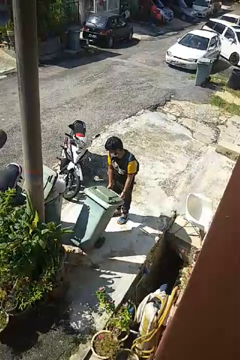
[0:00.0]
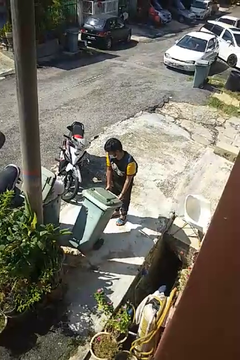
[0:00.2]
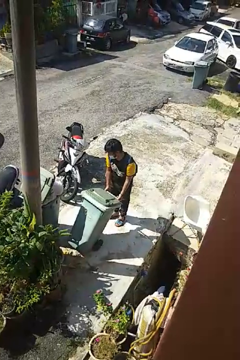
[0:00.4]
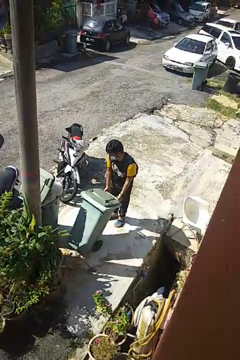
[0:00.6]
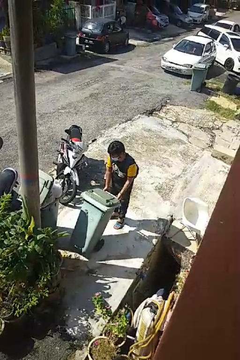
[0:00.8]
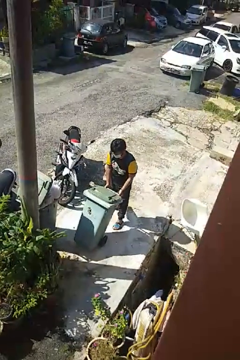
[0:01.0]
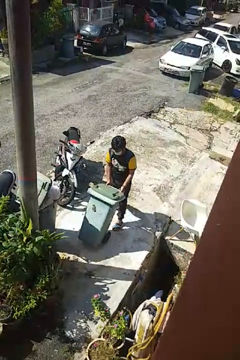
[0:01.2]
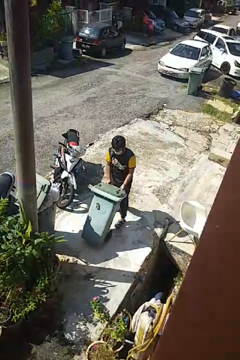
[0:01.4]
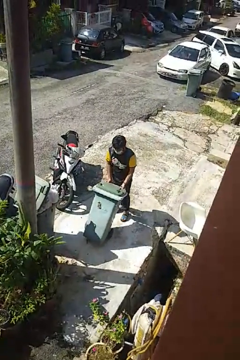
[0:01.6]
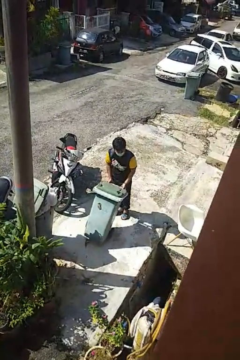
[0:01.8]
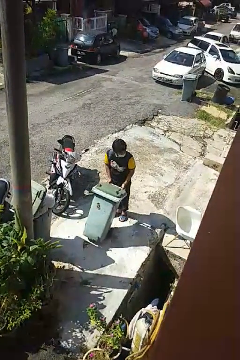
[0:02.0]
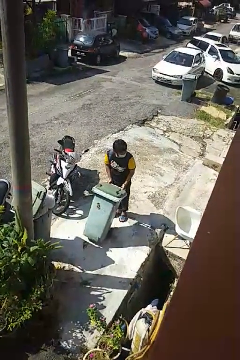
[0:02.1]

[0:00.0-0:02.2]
person pulls wheeled trashcan

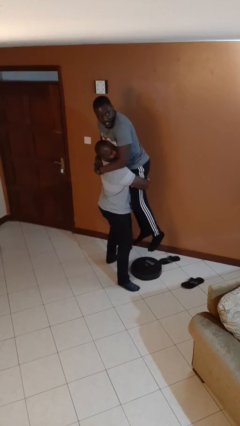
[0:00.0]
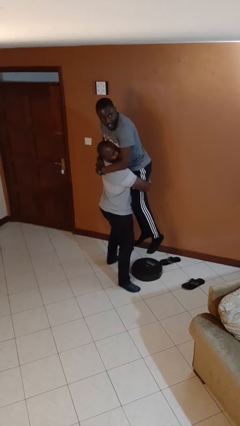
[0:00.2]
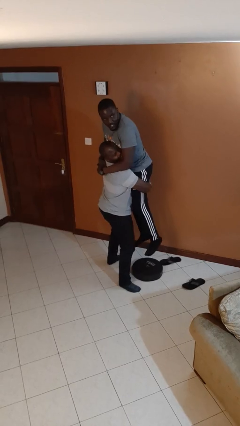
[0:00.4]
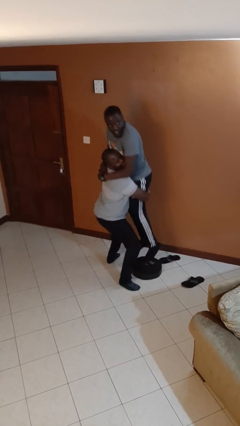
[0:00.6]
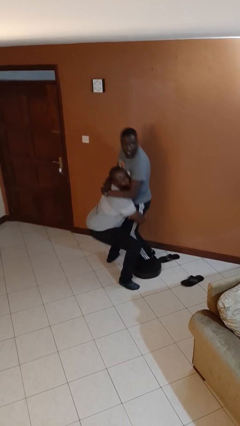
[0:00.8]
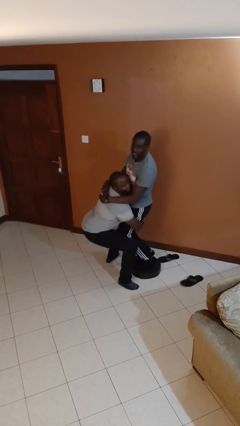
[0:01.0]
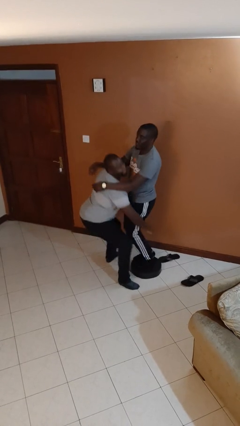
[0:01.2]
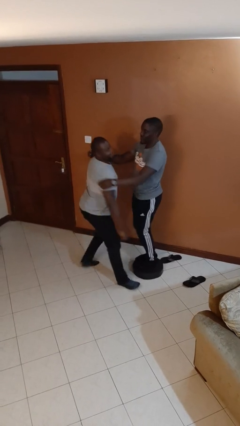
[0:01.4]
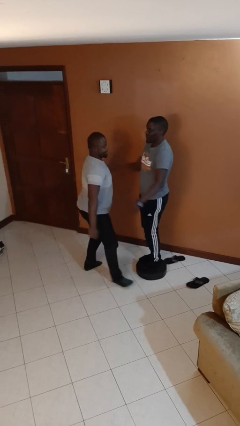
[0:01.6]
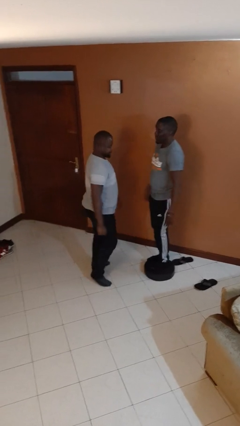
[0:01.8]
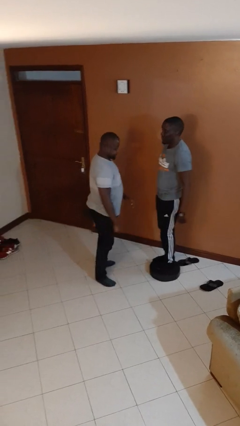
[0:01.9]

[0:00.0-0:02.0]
person puts down person

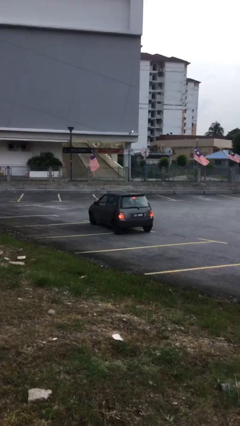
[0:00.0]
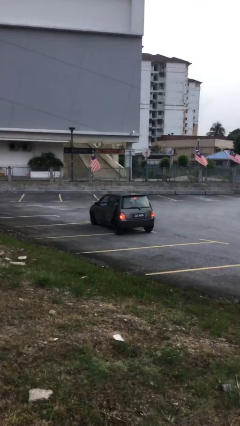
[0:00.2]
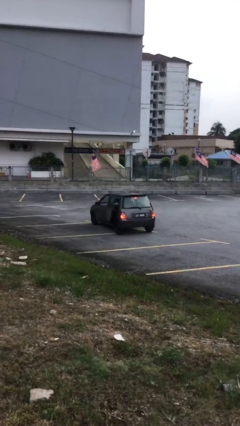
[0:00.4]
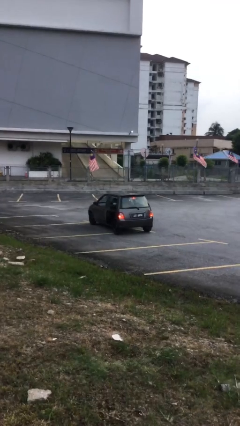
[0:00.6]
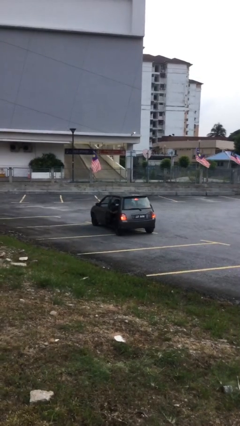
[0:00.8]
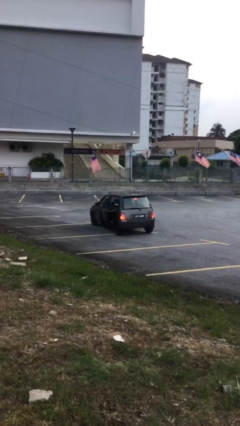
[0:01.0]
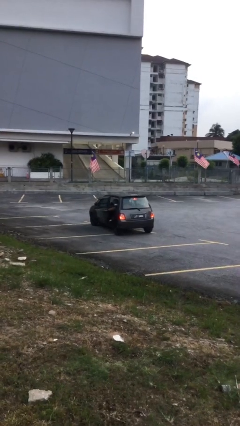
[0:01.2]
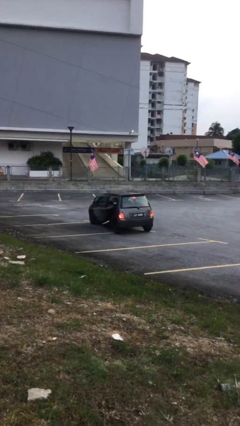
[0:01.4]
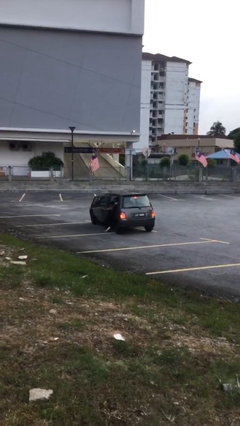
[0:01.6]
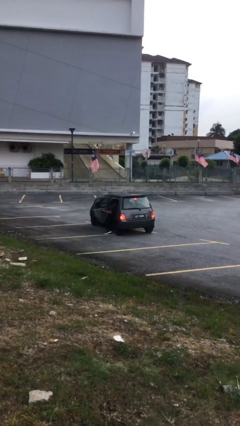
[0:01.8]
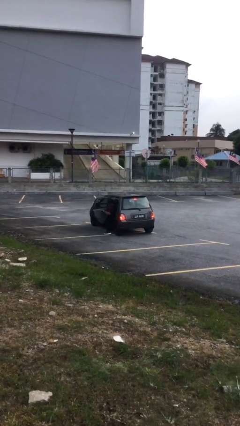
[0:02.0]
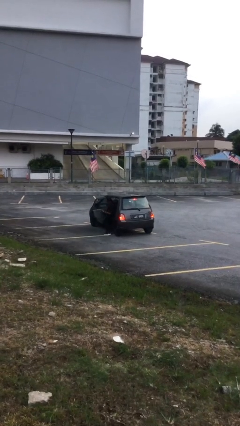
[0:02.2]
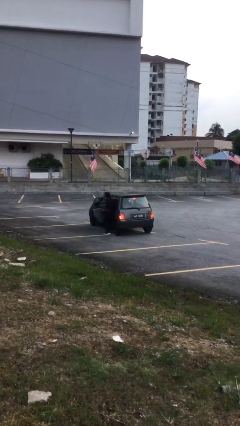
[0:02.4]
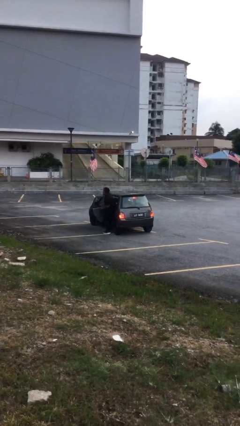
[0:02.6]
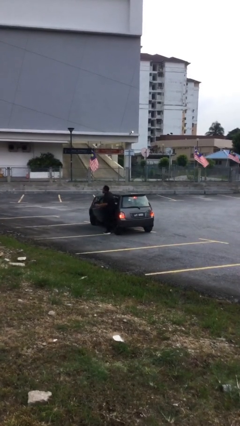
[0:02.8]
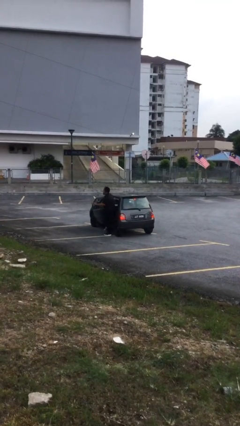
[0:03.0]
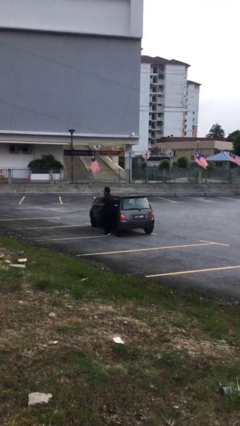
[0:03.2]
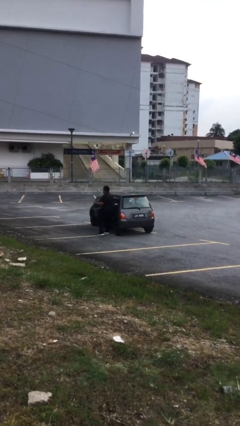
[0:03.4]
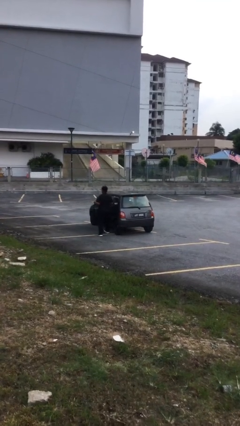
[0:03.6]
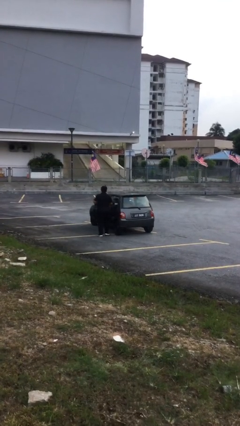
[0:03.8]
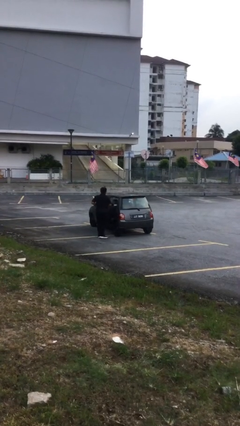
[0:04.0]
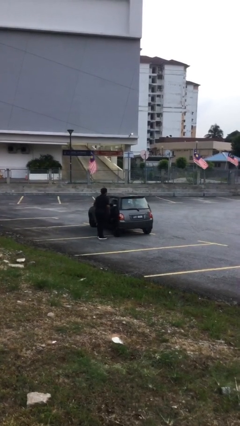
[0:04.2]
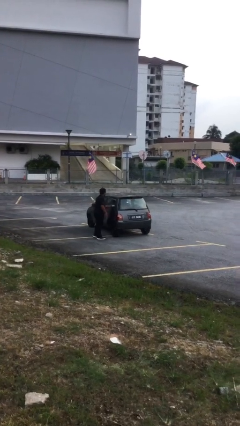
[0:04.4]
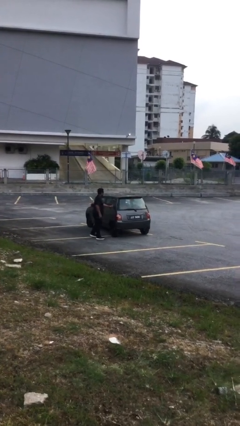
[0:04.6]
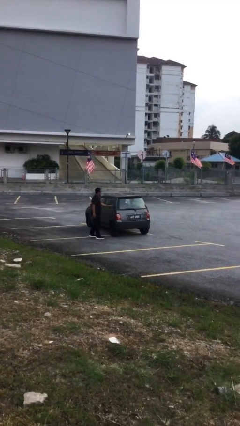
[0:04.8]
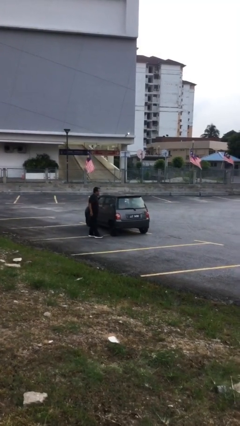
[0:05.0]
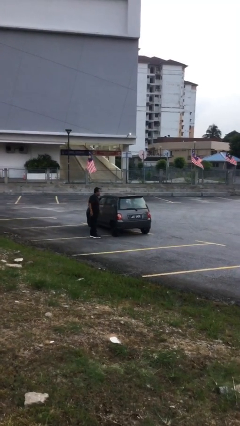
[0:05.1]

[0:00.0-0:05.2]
car drops off person

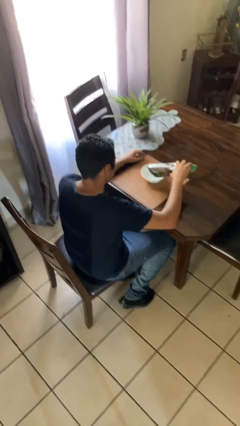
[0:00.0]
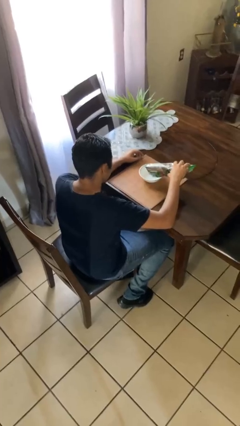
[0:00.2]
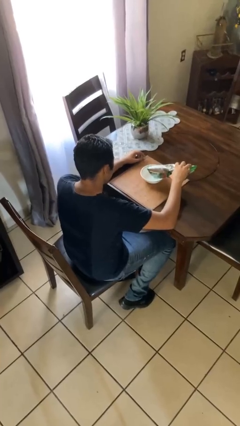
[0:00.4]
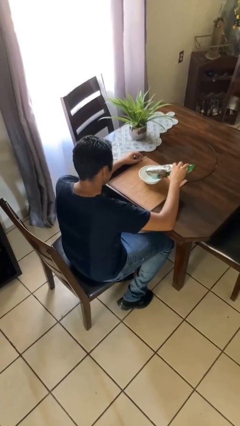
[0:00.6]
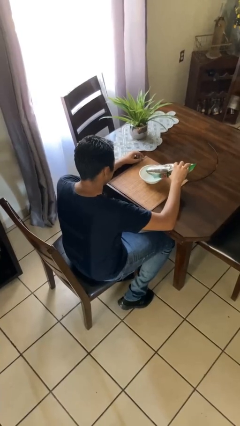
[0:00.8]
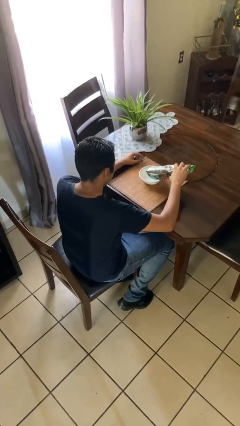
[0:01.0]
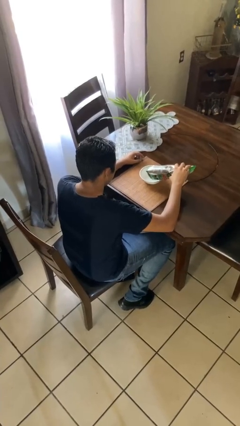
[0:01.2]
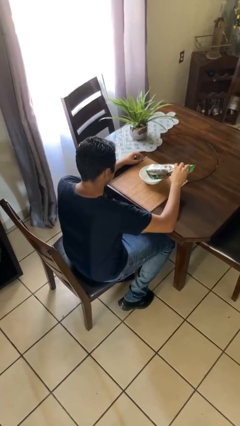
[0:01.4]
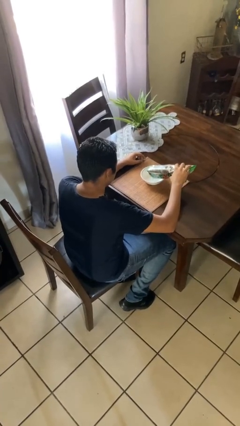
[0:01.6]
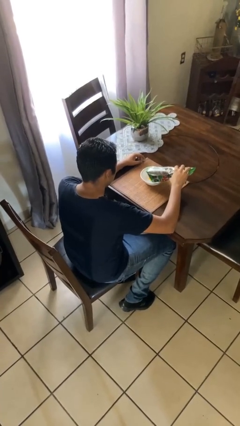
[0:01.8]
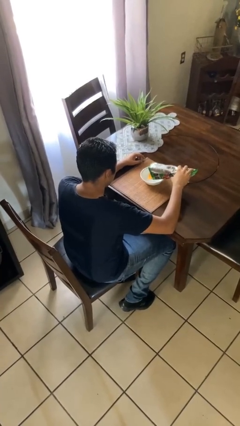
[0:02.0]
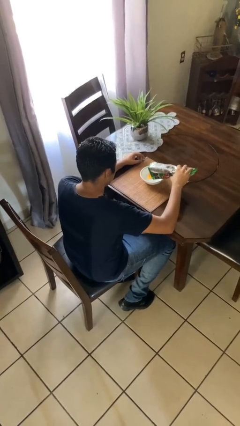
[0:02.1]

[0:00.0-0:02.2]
person pours into bowl

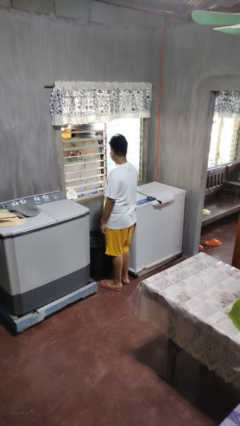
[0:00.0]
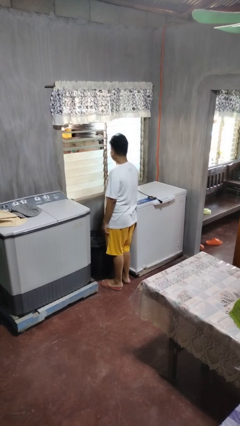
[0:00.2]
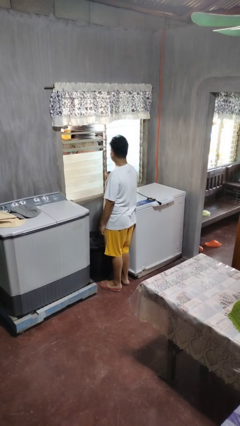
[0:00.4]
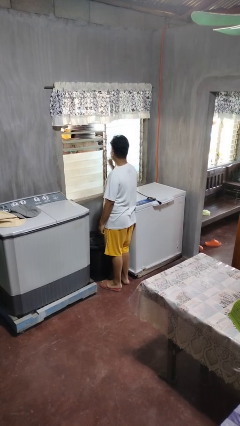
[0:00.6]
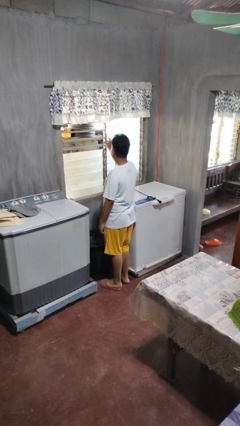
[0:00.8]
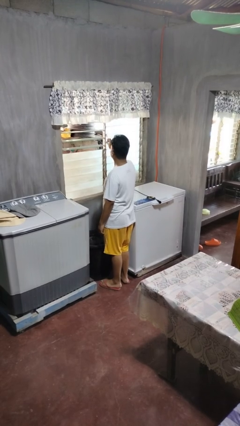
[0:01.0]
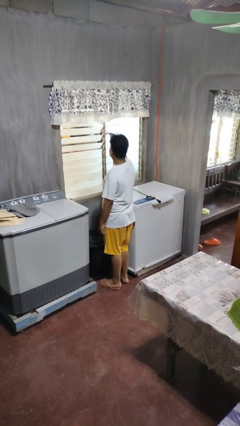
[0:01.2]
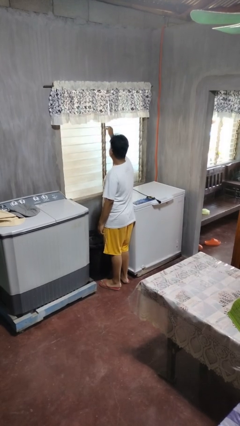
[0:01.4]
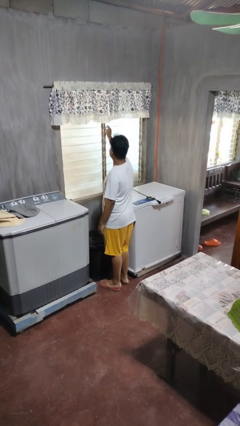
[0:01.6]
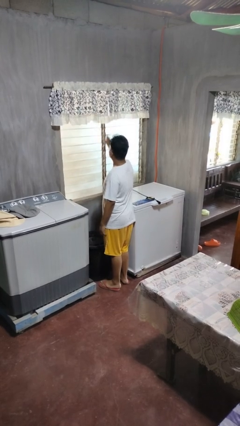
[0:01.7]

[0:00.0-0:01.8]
person closes home window

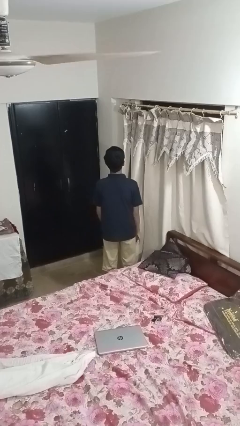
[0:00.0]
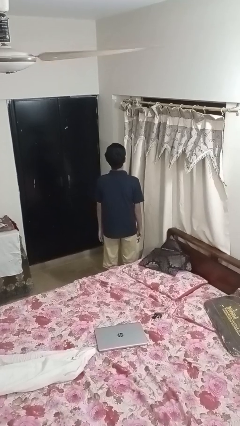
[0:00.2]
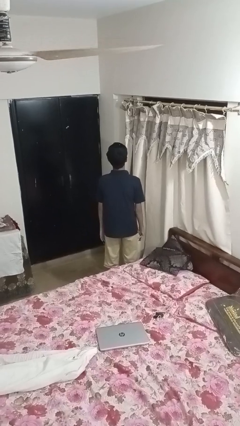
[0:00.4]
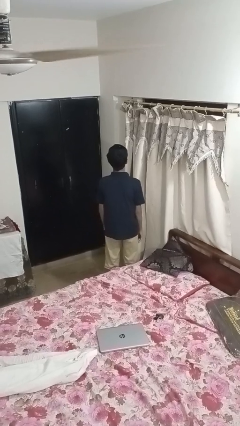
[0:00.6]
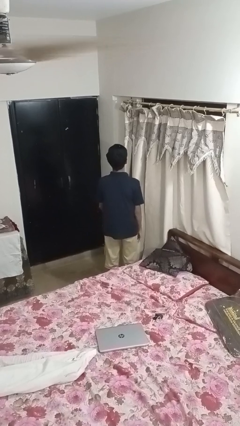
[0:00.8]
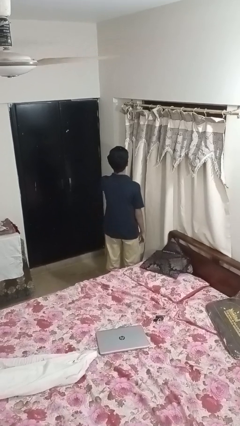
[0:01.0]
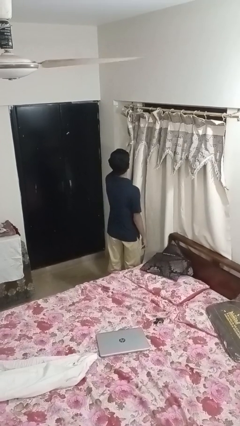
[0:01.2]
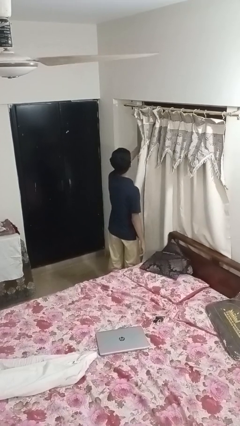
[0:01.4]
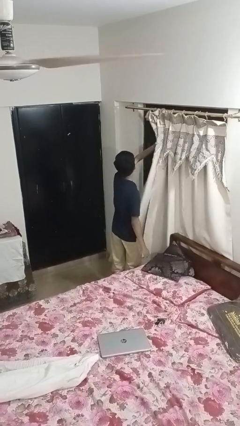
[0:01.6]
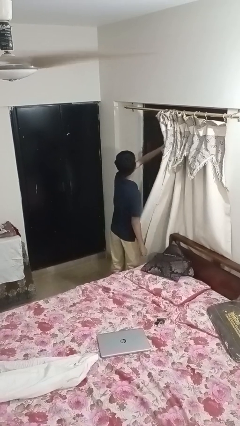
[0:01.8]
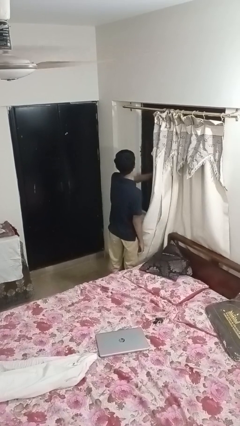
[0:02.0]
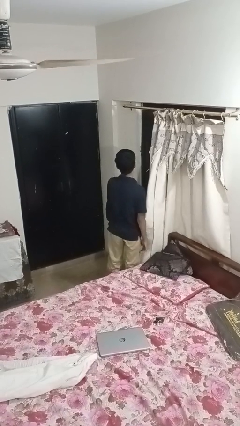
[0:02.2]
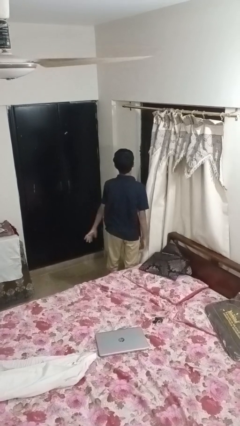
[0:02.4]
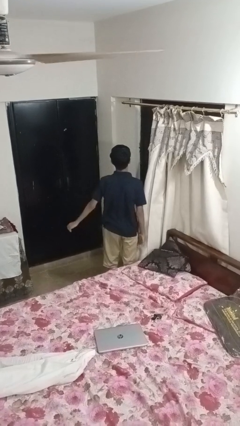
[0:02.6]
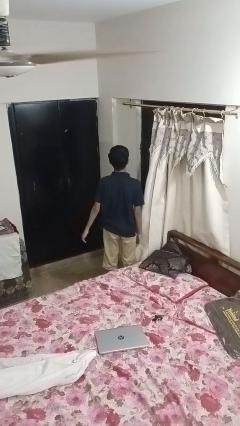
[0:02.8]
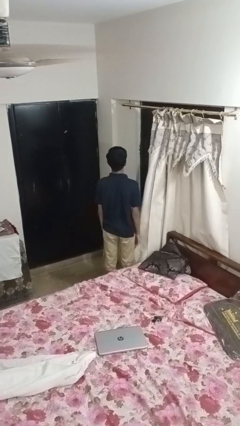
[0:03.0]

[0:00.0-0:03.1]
person opens curtains

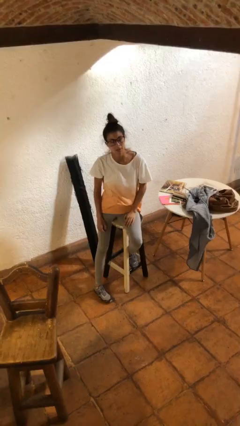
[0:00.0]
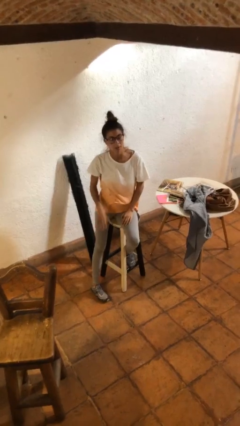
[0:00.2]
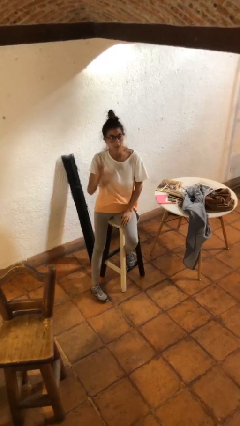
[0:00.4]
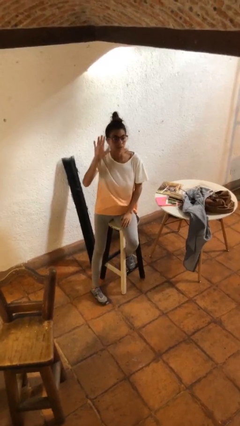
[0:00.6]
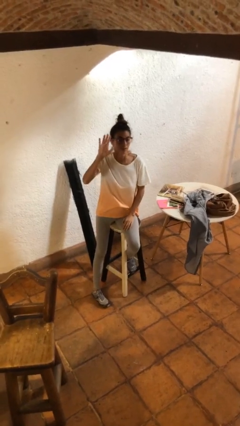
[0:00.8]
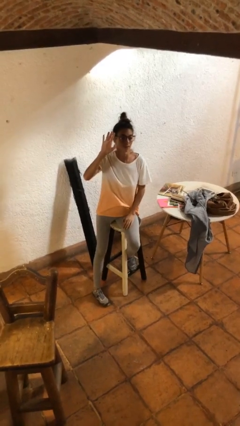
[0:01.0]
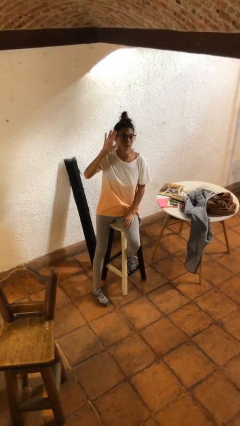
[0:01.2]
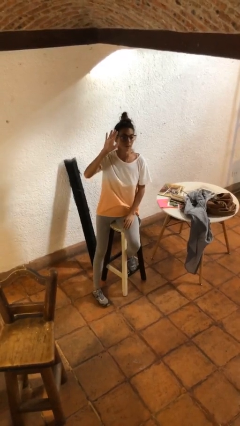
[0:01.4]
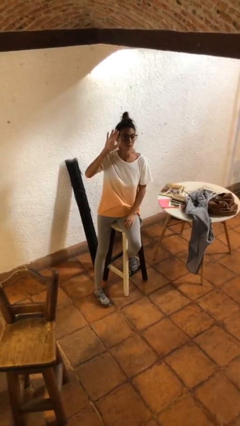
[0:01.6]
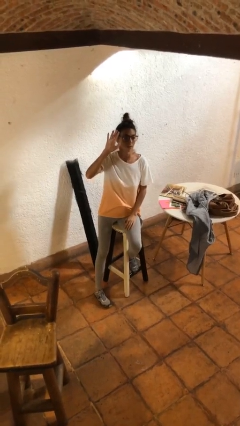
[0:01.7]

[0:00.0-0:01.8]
person gestures raise hand
